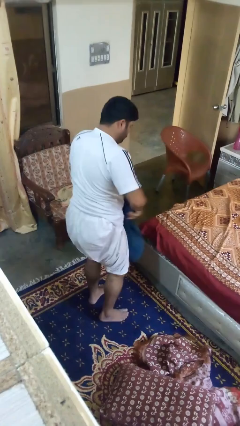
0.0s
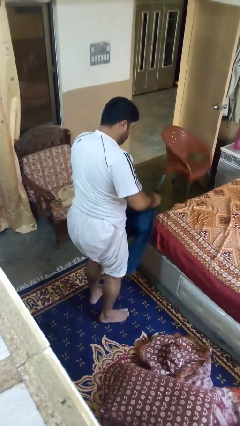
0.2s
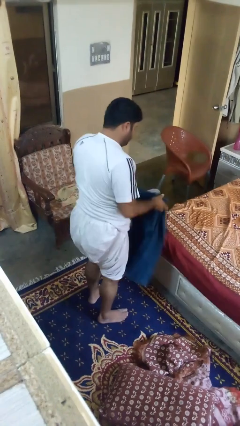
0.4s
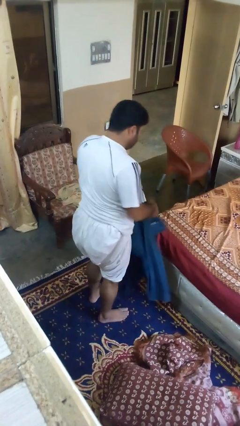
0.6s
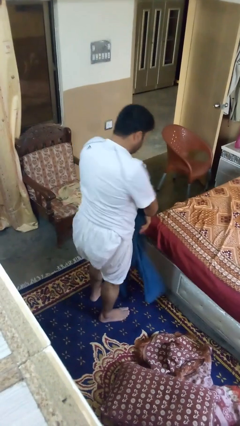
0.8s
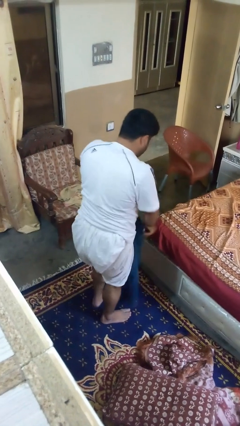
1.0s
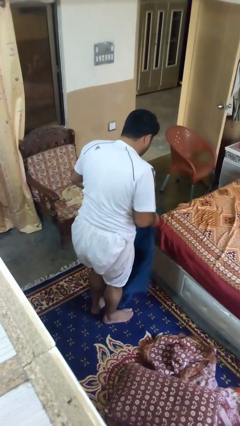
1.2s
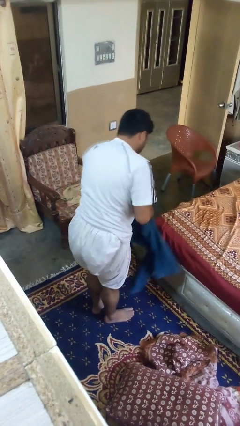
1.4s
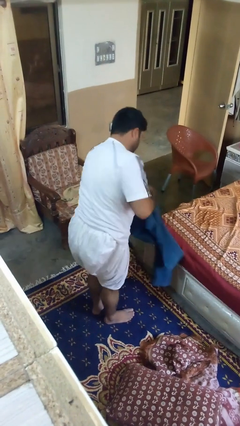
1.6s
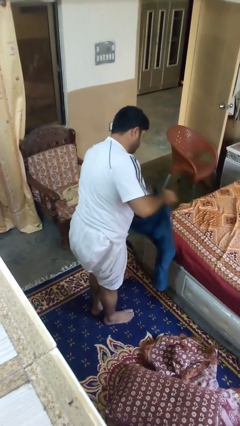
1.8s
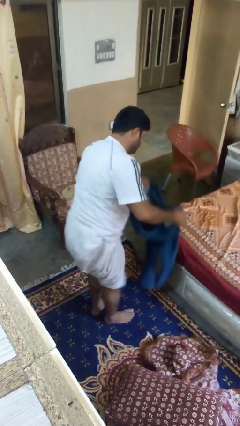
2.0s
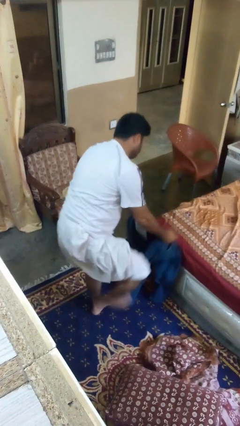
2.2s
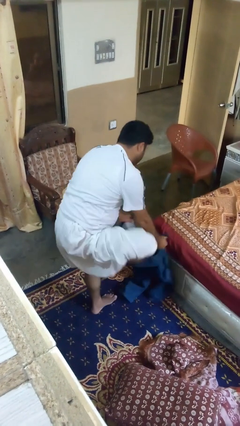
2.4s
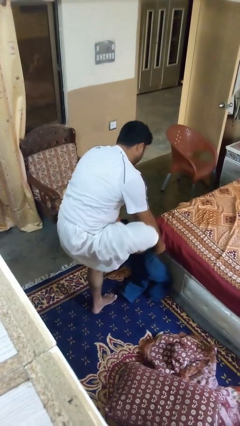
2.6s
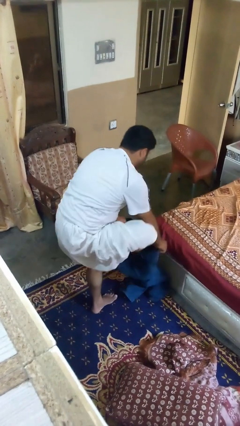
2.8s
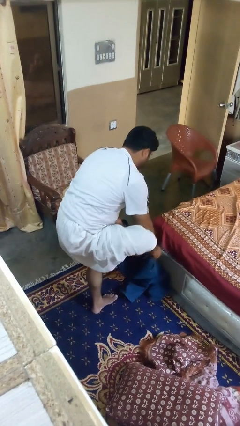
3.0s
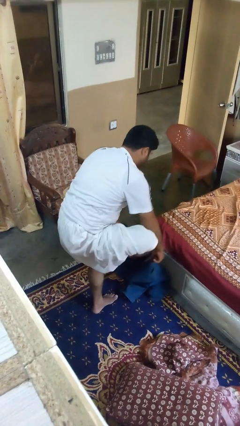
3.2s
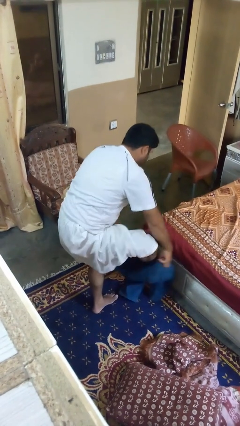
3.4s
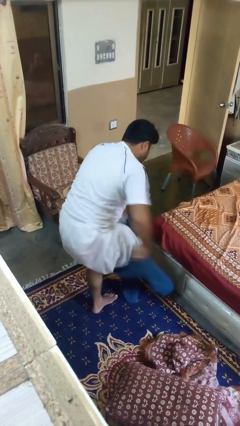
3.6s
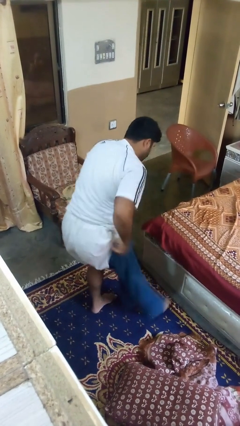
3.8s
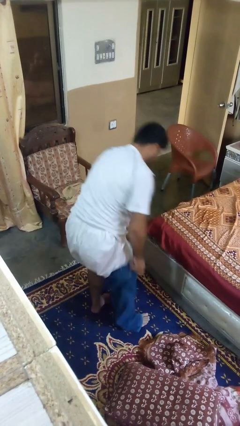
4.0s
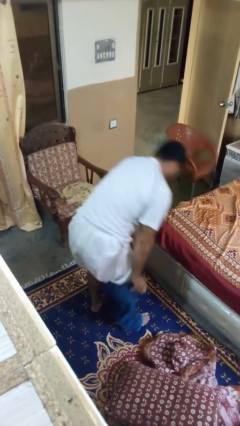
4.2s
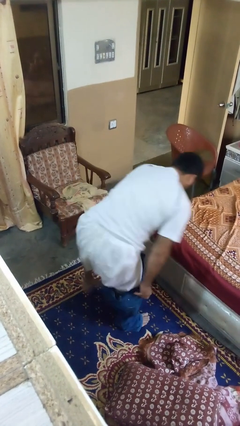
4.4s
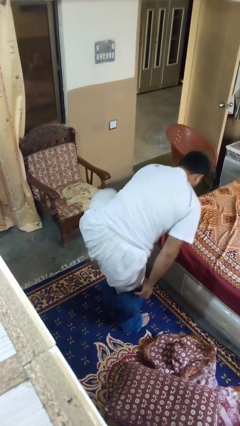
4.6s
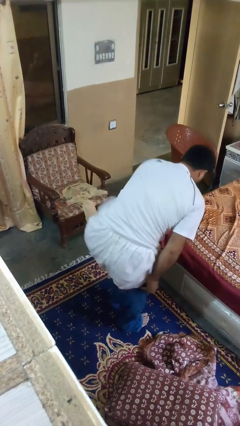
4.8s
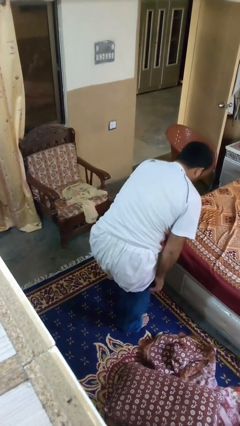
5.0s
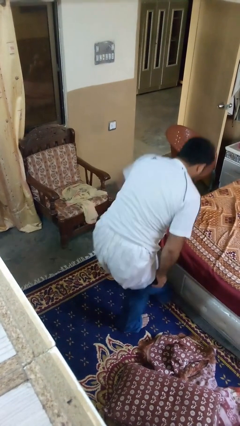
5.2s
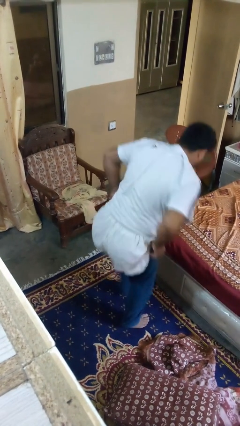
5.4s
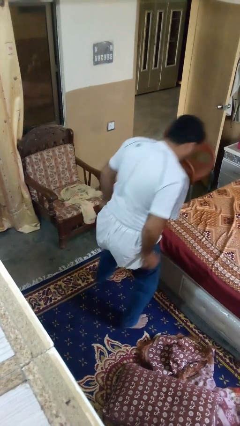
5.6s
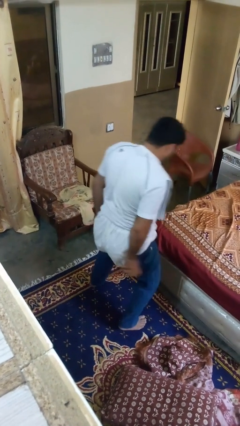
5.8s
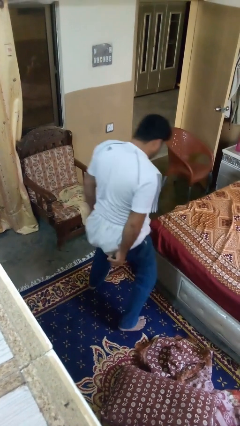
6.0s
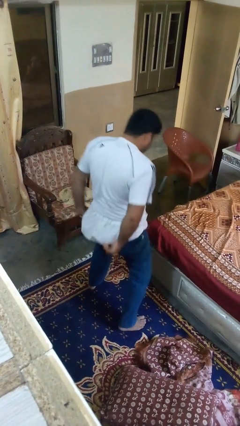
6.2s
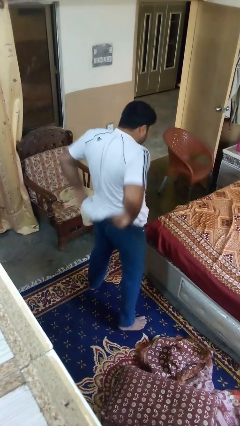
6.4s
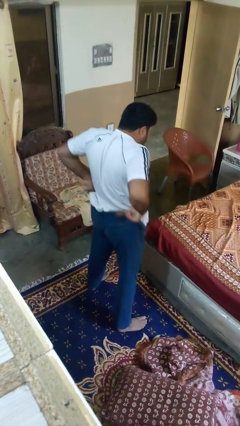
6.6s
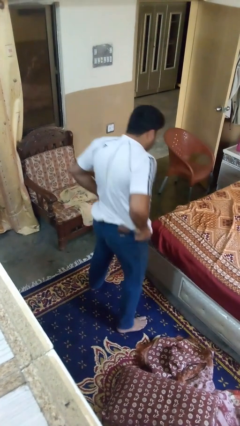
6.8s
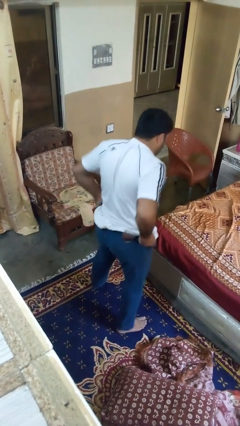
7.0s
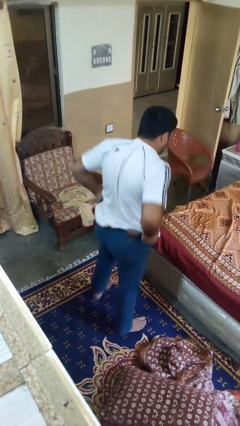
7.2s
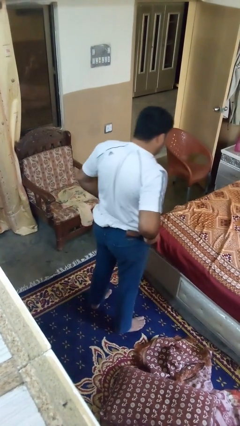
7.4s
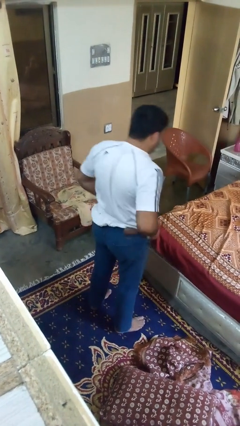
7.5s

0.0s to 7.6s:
person puts on pants

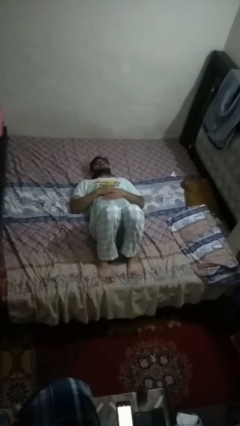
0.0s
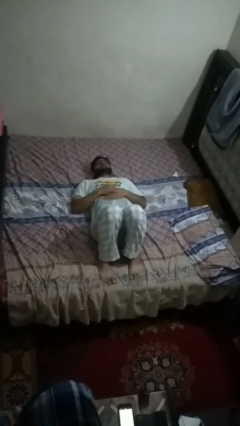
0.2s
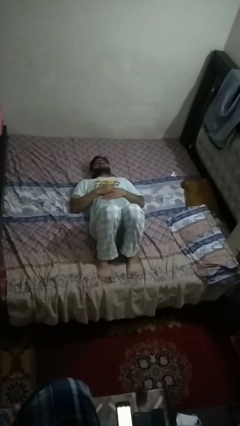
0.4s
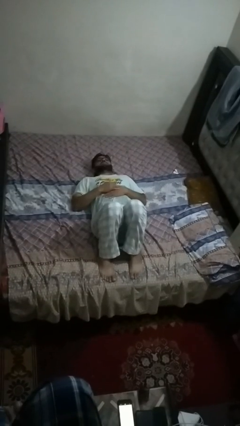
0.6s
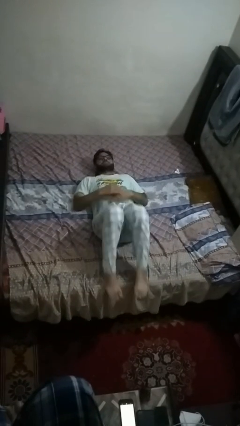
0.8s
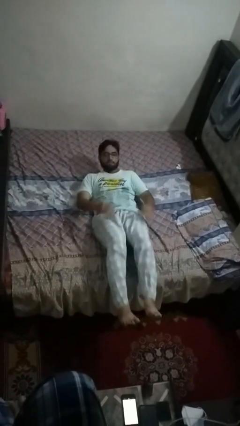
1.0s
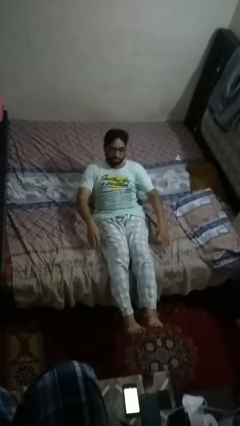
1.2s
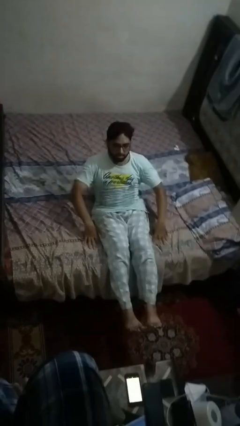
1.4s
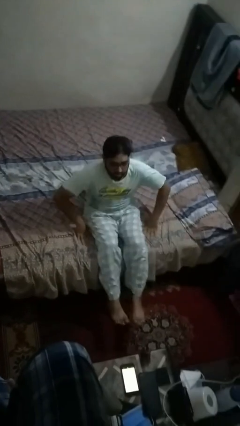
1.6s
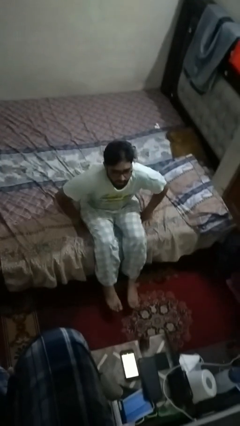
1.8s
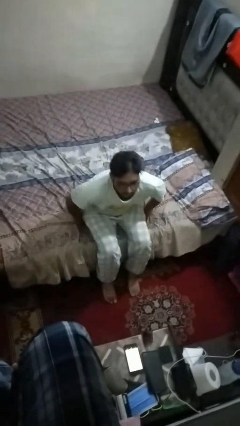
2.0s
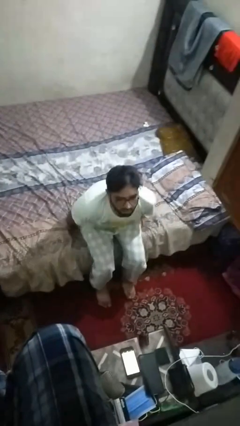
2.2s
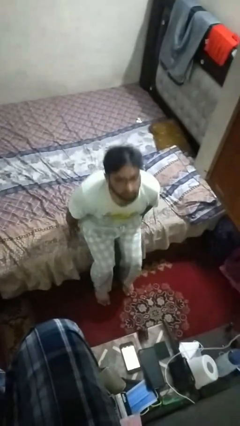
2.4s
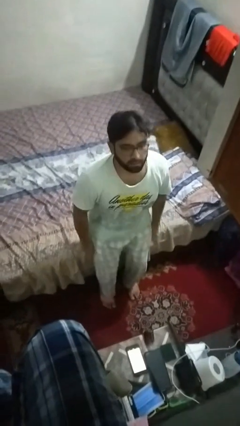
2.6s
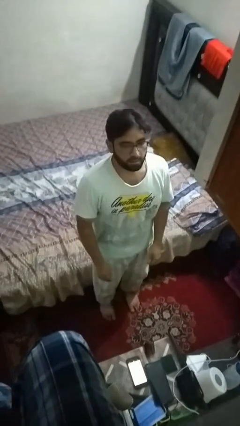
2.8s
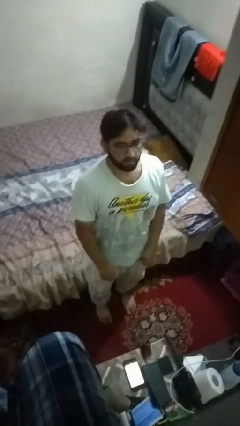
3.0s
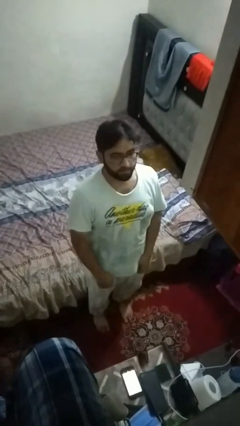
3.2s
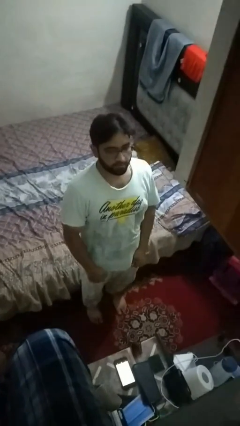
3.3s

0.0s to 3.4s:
person stands up

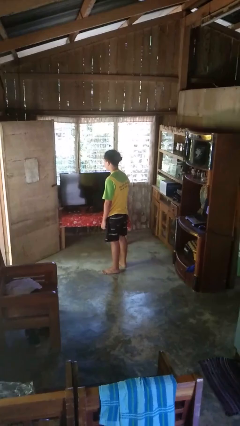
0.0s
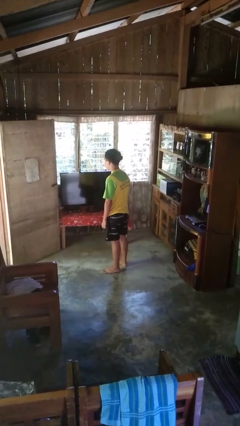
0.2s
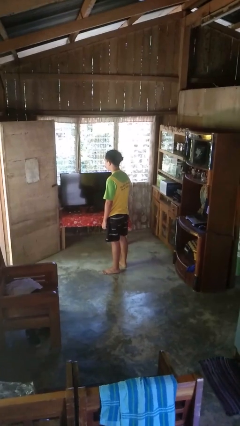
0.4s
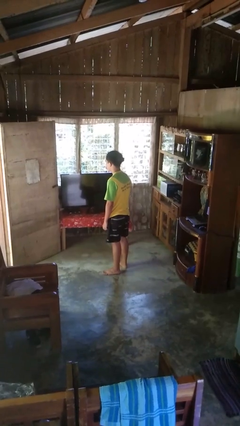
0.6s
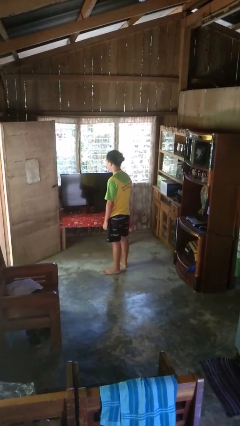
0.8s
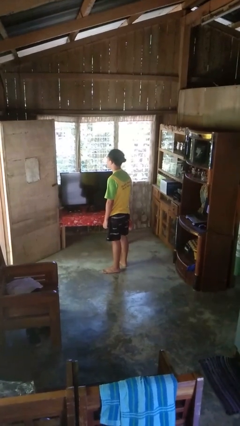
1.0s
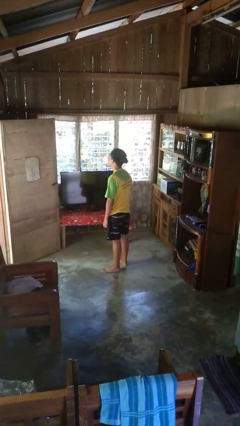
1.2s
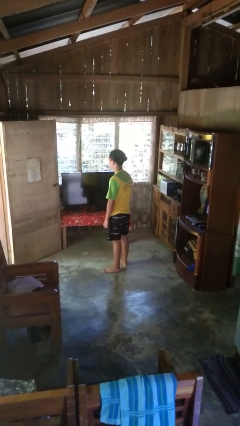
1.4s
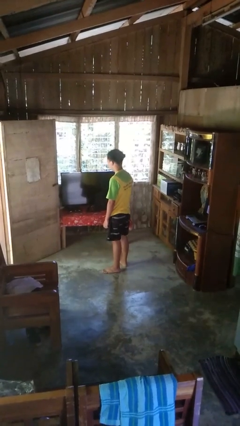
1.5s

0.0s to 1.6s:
person nods head

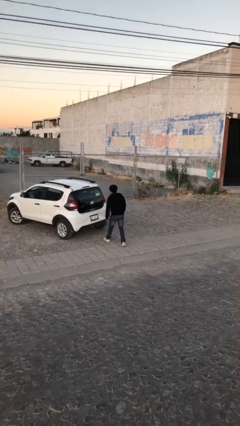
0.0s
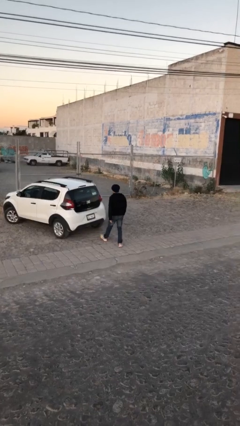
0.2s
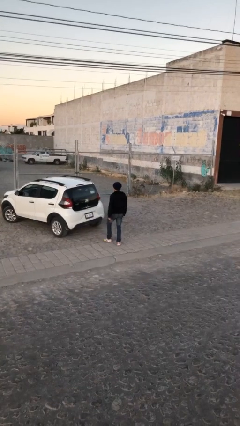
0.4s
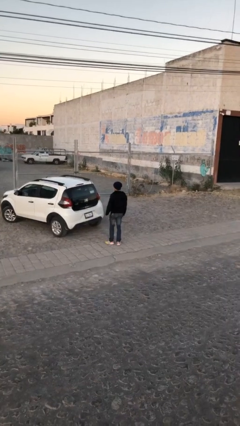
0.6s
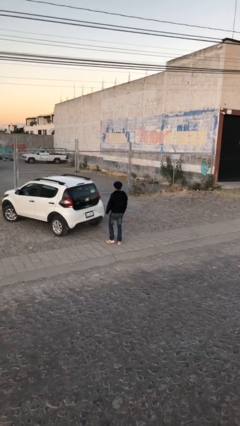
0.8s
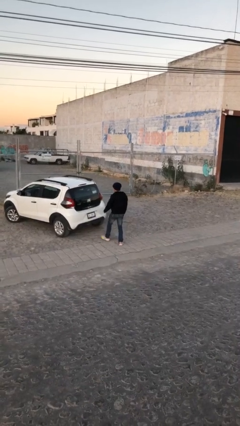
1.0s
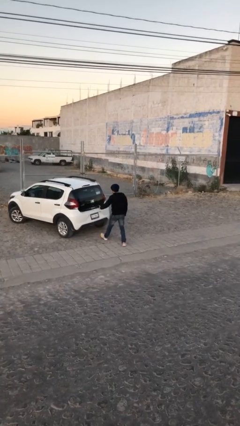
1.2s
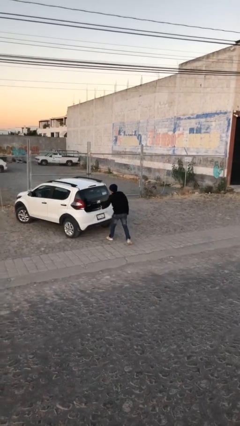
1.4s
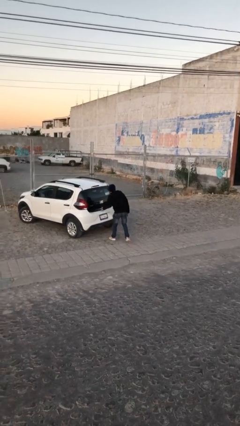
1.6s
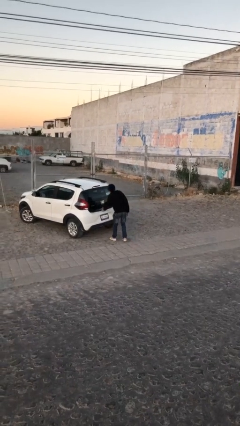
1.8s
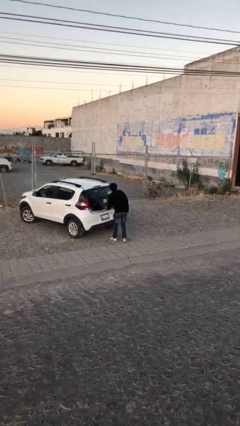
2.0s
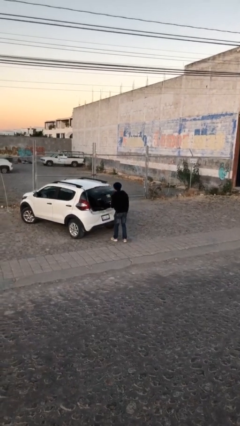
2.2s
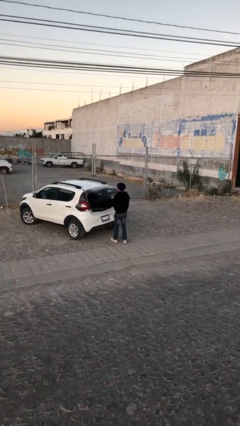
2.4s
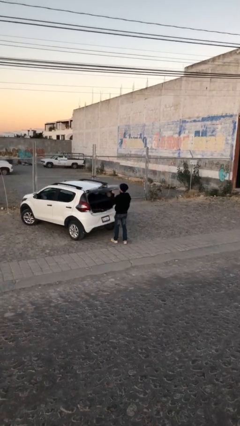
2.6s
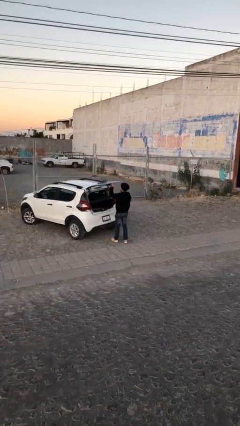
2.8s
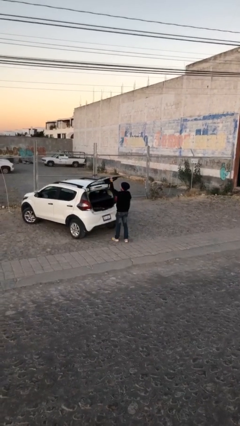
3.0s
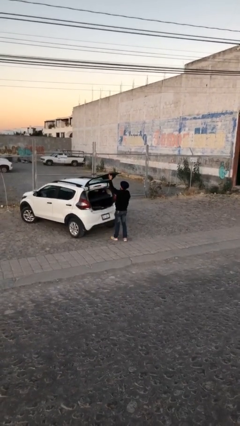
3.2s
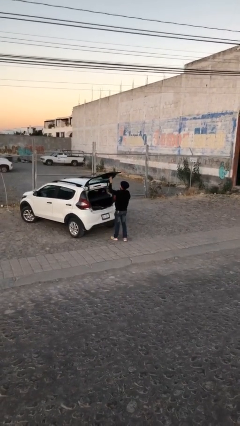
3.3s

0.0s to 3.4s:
person opens car trunk

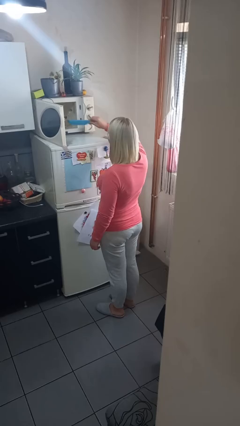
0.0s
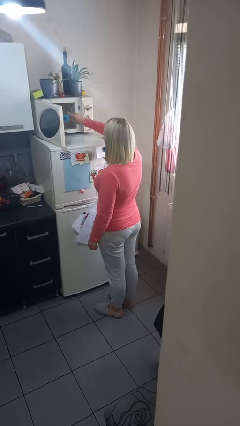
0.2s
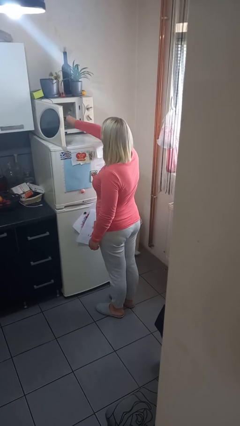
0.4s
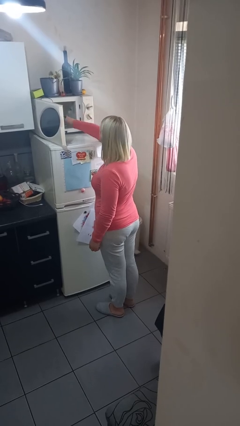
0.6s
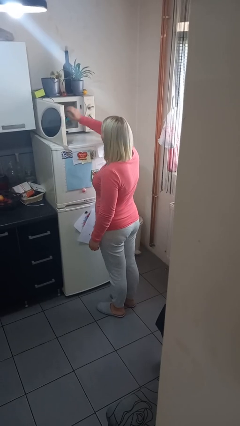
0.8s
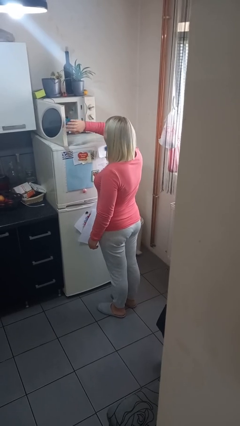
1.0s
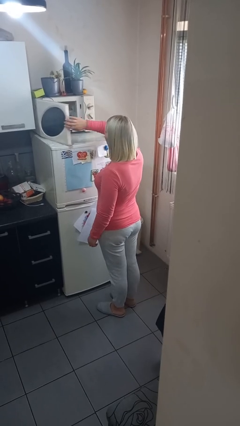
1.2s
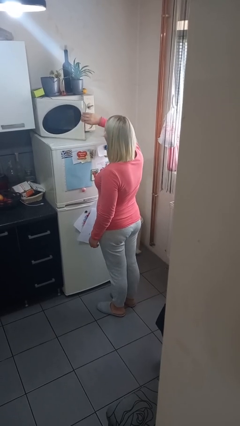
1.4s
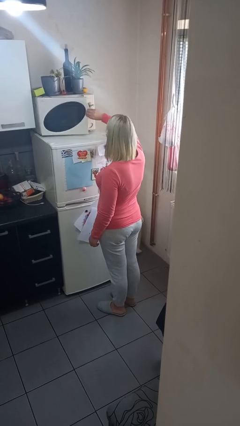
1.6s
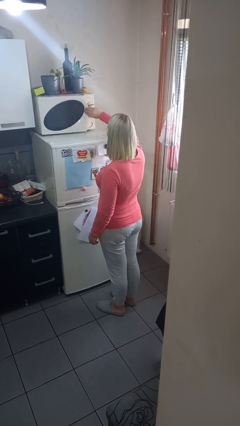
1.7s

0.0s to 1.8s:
person puts object into microwave
